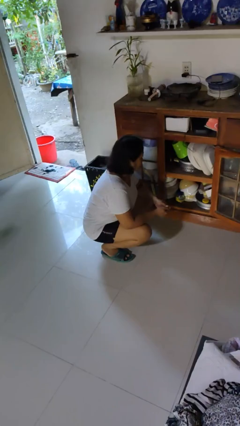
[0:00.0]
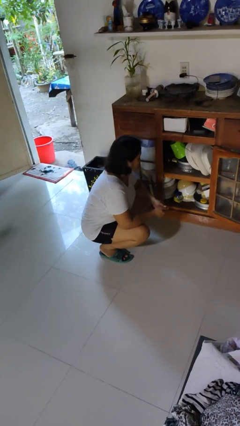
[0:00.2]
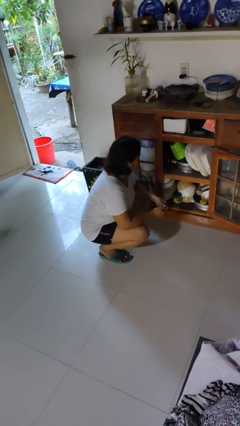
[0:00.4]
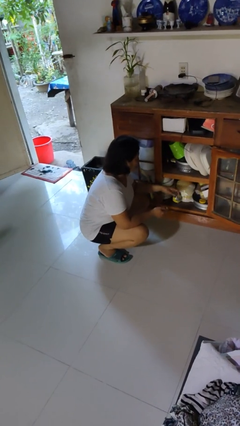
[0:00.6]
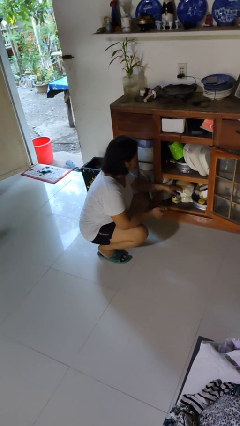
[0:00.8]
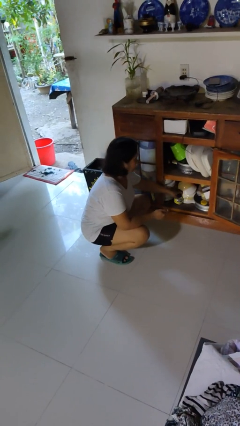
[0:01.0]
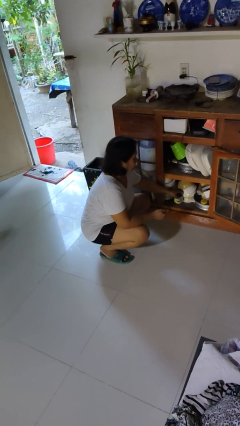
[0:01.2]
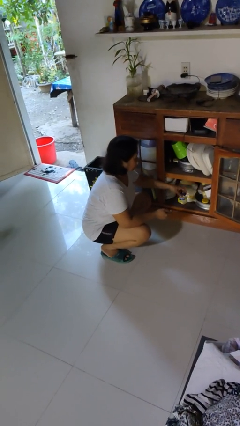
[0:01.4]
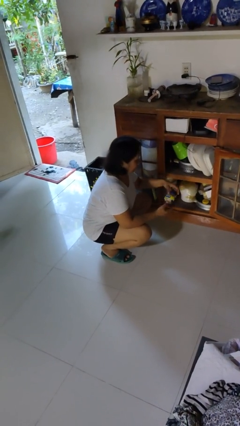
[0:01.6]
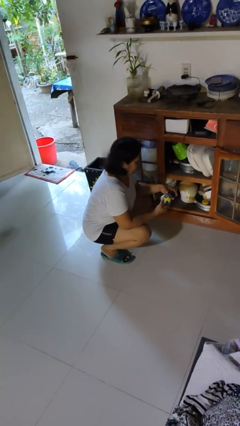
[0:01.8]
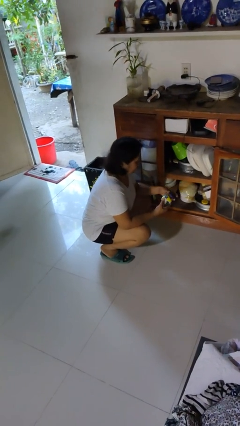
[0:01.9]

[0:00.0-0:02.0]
person picks up object from cabinet

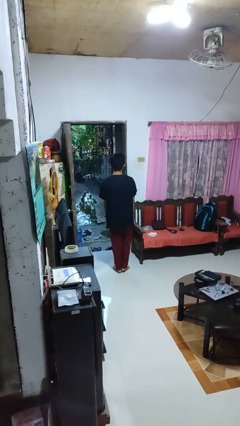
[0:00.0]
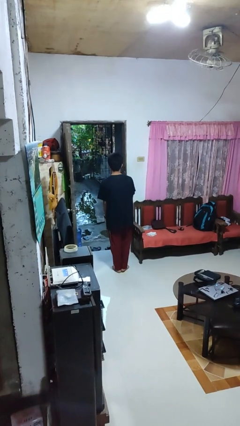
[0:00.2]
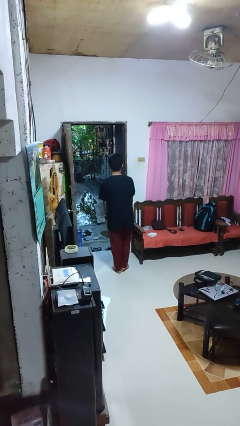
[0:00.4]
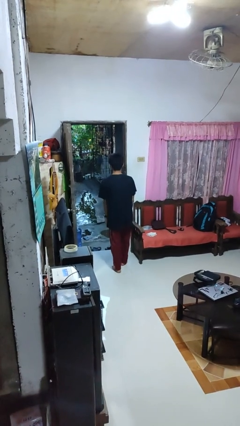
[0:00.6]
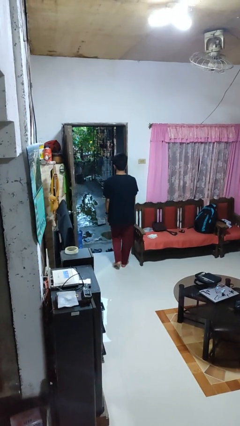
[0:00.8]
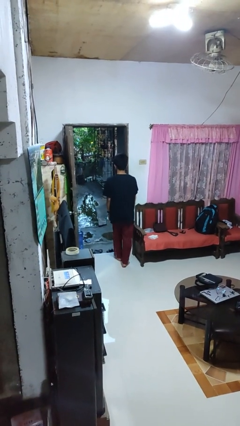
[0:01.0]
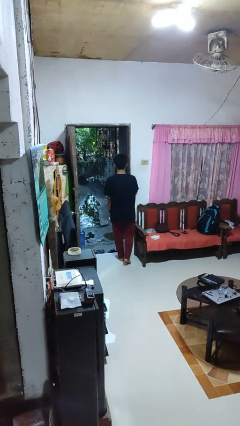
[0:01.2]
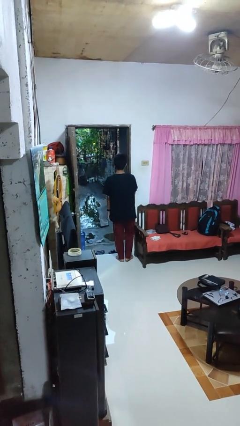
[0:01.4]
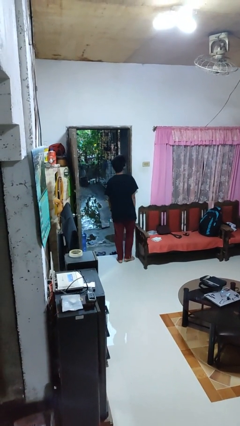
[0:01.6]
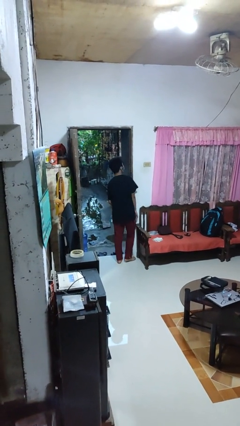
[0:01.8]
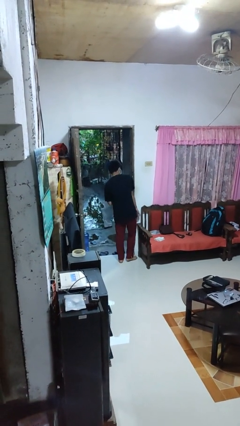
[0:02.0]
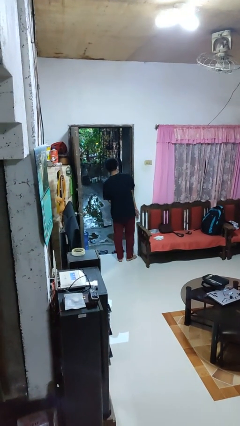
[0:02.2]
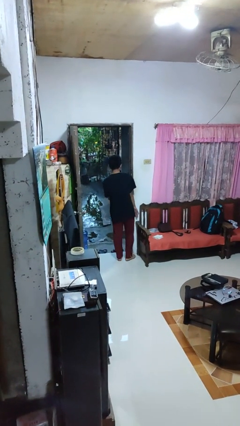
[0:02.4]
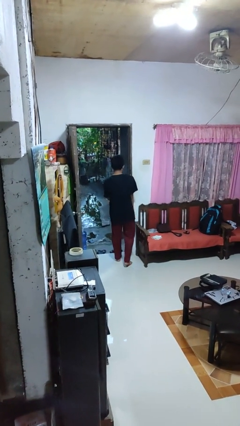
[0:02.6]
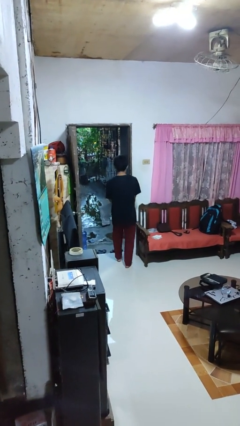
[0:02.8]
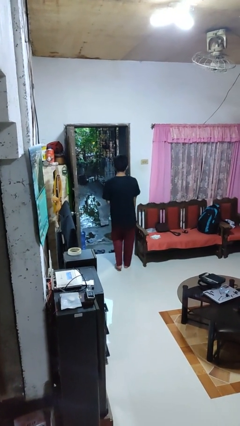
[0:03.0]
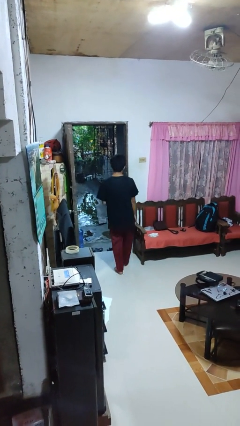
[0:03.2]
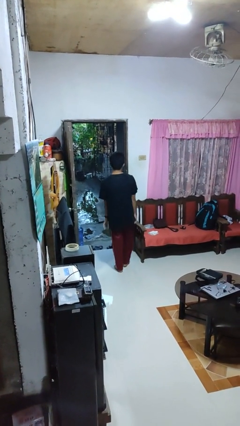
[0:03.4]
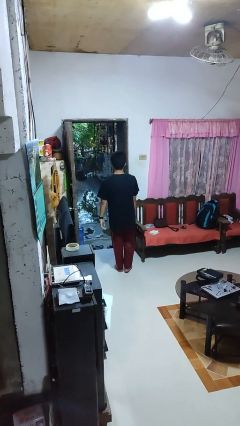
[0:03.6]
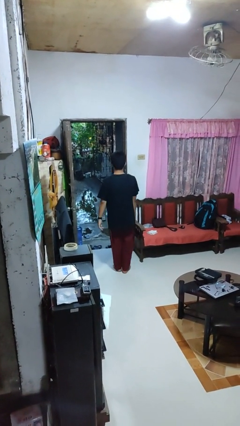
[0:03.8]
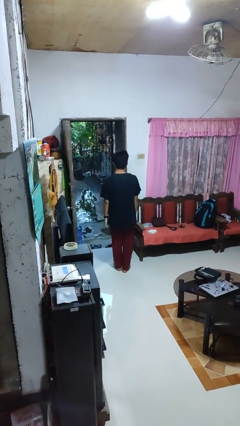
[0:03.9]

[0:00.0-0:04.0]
person bumps into wall

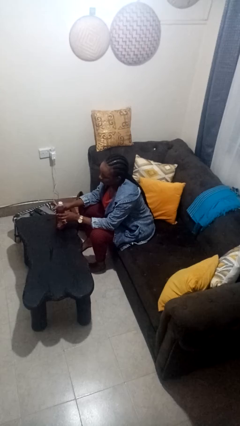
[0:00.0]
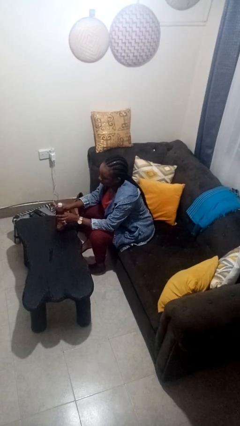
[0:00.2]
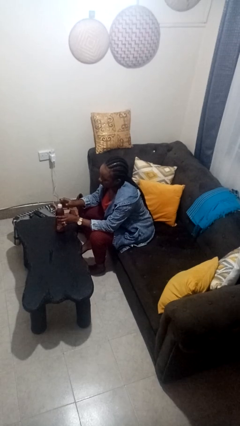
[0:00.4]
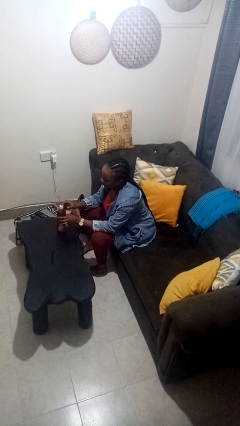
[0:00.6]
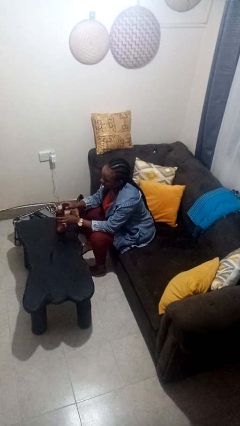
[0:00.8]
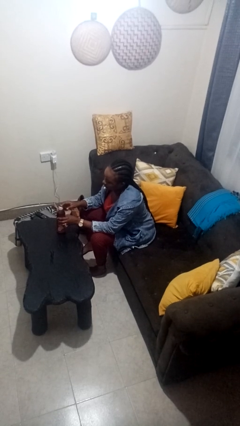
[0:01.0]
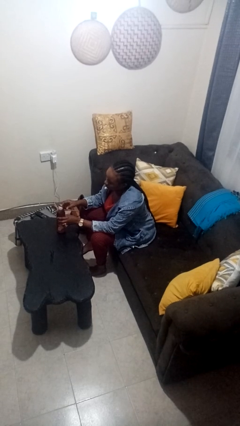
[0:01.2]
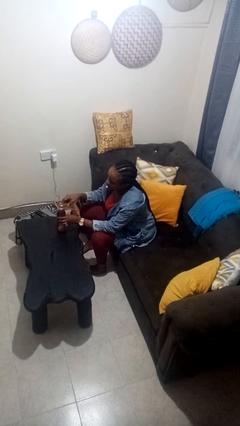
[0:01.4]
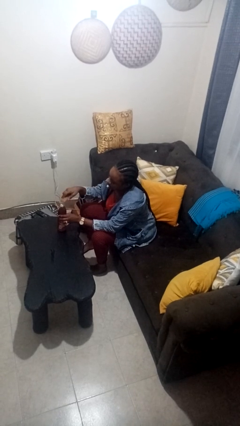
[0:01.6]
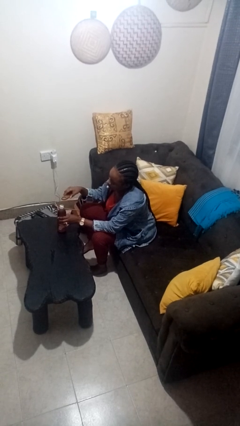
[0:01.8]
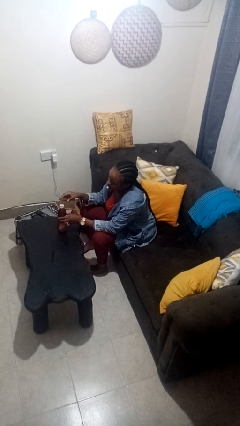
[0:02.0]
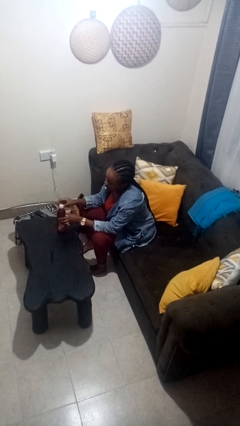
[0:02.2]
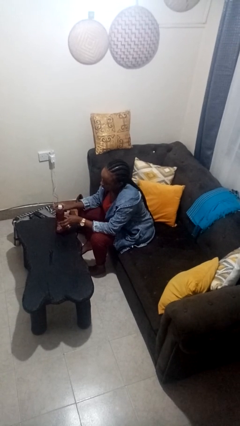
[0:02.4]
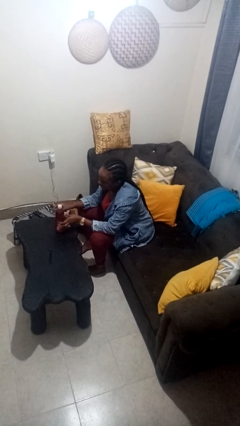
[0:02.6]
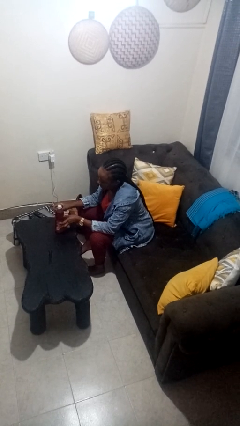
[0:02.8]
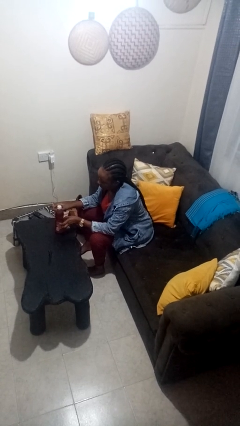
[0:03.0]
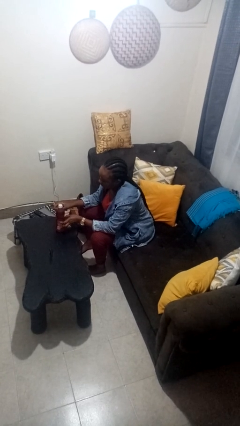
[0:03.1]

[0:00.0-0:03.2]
person opens can with can opener

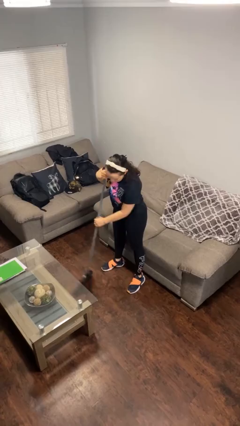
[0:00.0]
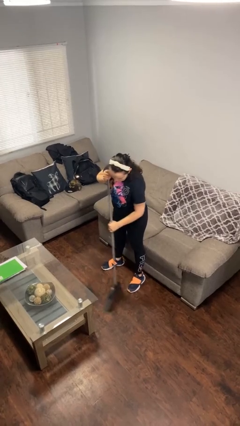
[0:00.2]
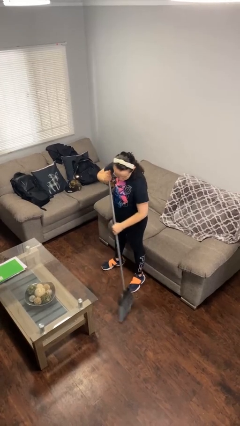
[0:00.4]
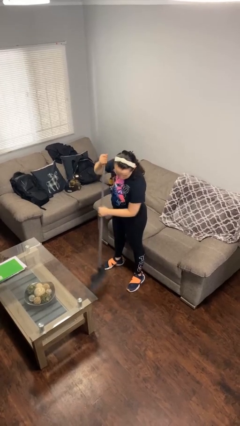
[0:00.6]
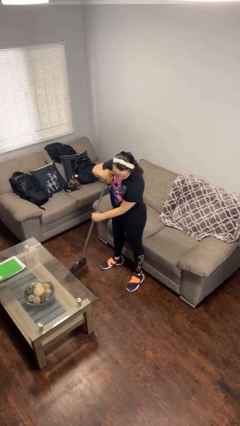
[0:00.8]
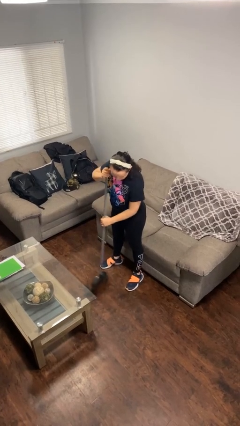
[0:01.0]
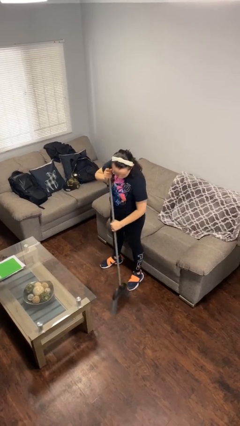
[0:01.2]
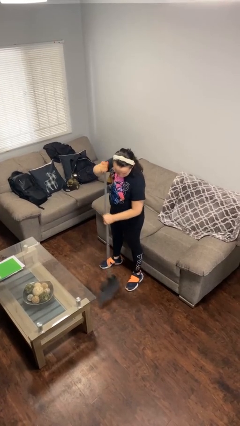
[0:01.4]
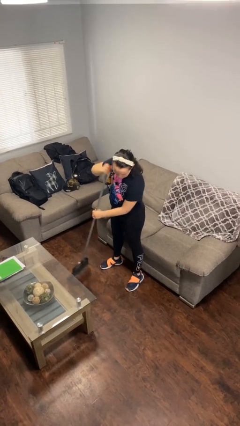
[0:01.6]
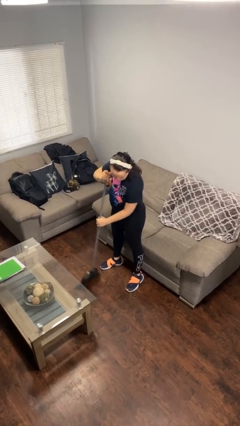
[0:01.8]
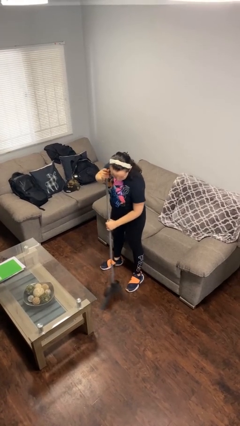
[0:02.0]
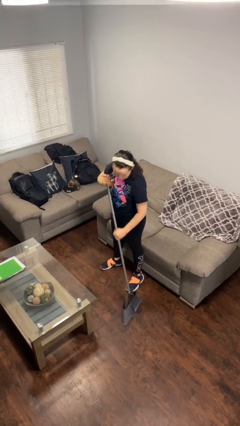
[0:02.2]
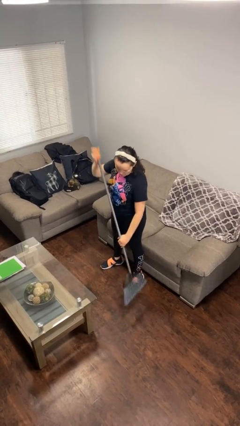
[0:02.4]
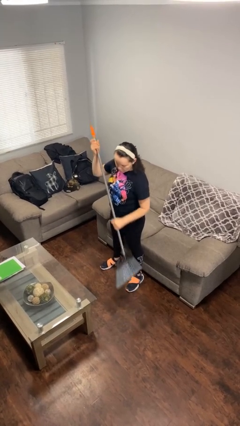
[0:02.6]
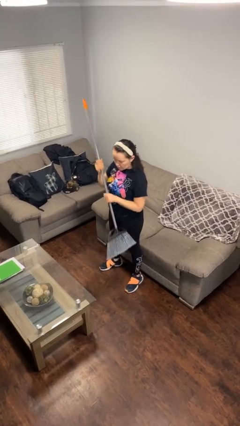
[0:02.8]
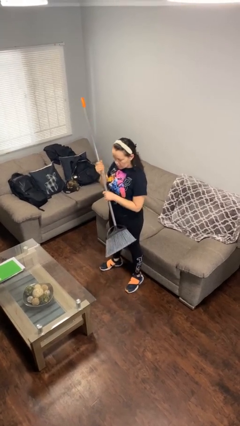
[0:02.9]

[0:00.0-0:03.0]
person sweeps floor

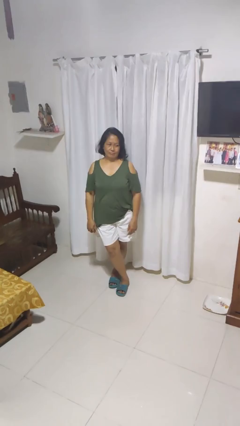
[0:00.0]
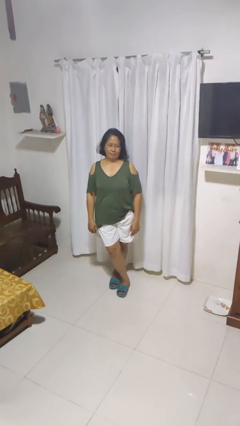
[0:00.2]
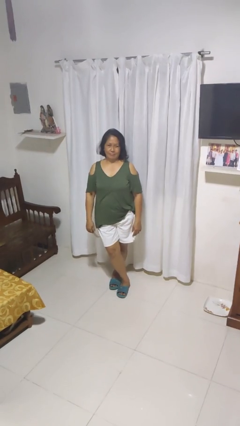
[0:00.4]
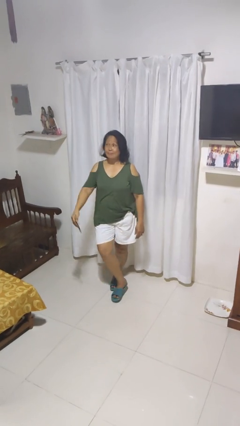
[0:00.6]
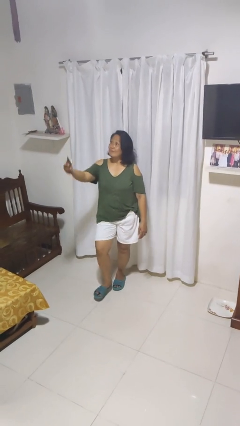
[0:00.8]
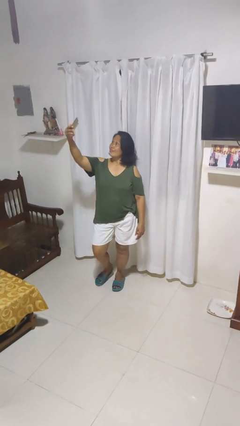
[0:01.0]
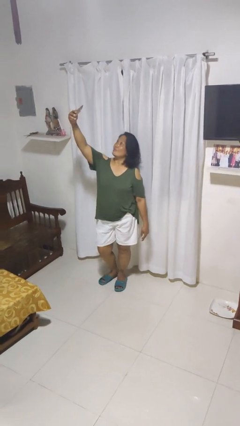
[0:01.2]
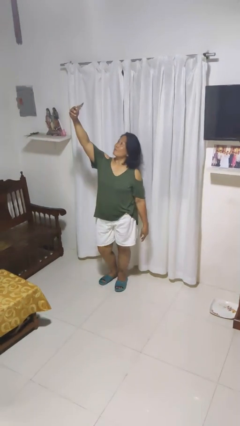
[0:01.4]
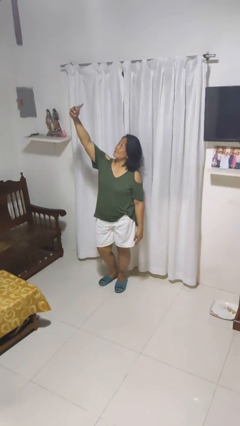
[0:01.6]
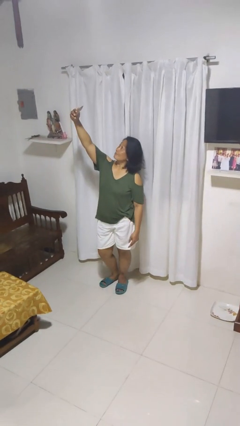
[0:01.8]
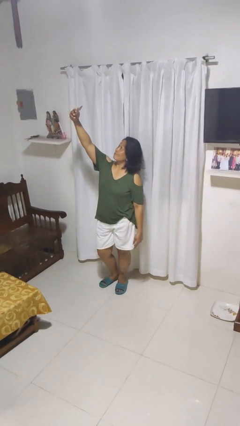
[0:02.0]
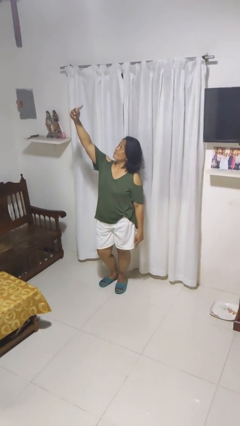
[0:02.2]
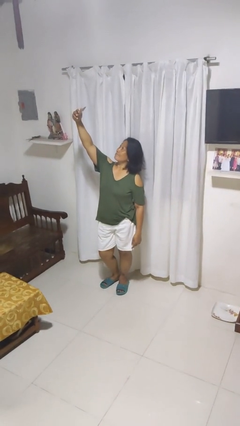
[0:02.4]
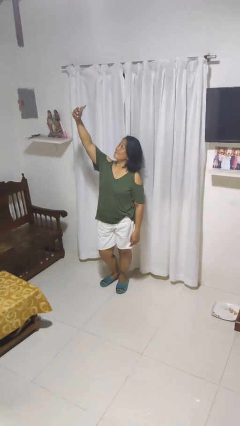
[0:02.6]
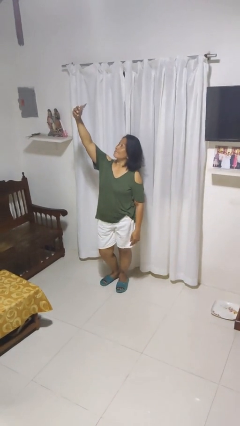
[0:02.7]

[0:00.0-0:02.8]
person takes selfie

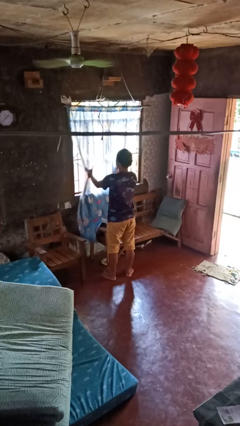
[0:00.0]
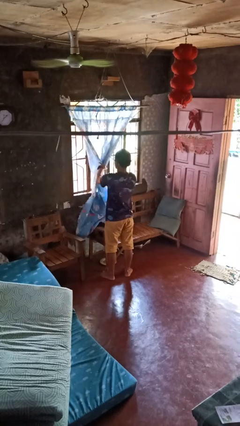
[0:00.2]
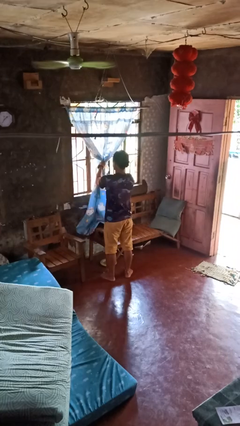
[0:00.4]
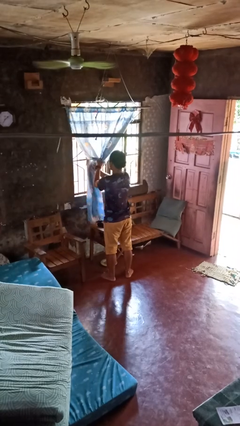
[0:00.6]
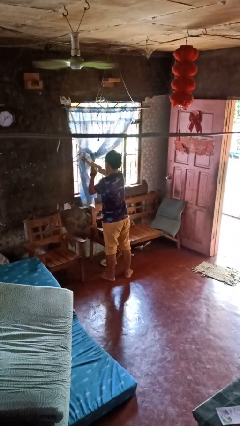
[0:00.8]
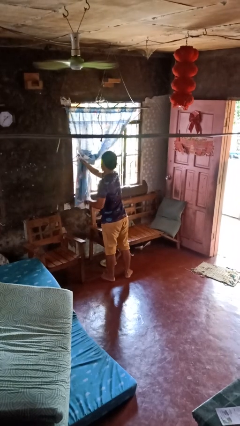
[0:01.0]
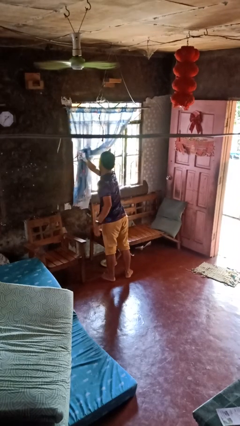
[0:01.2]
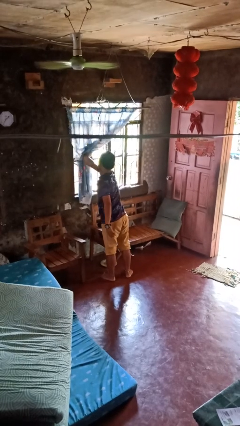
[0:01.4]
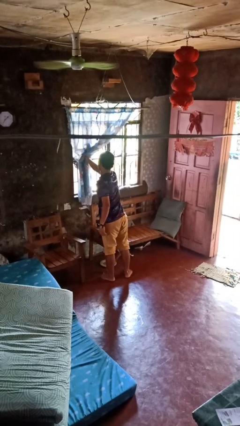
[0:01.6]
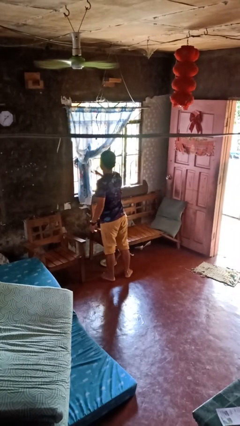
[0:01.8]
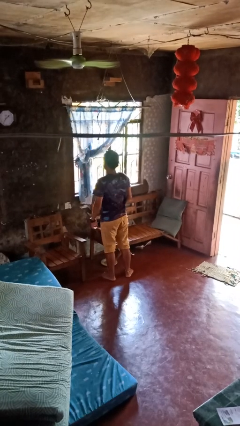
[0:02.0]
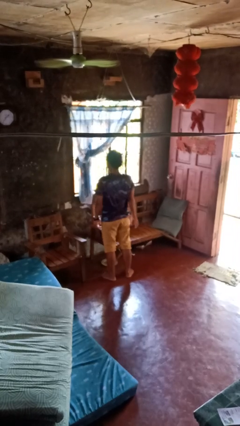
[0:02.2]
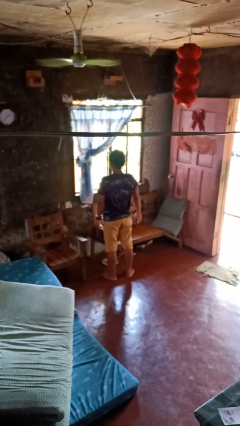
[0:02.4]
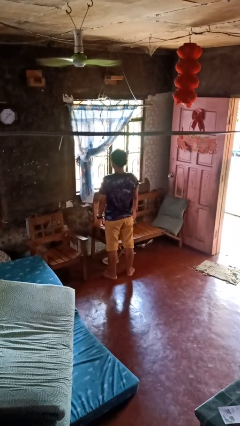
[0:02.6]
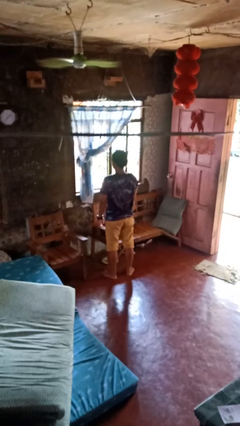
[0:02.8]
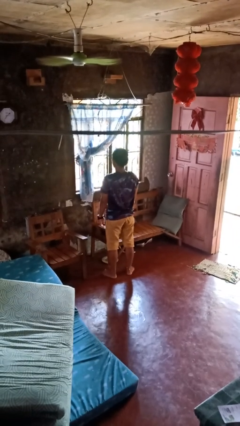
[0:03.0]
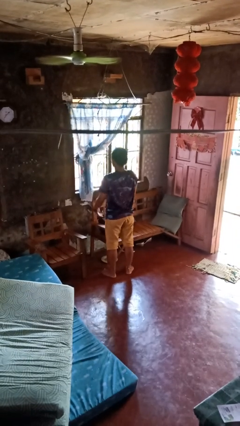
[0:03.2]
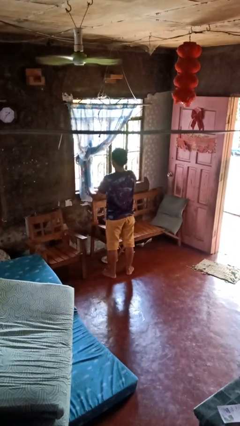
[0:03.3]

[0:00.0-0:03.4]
person opens curtains
